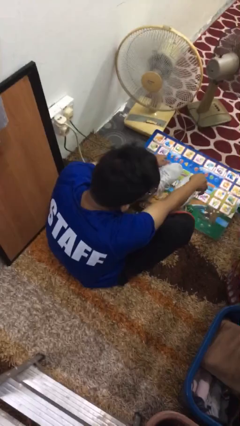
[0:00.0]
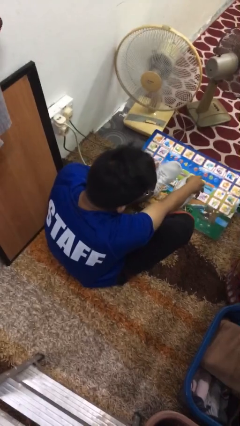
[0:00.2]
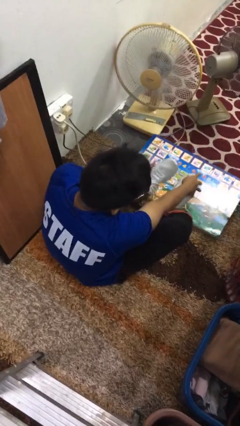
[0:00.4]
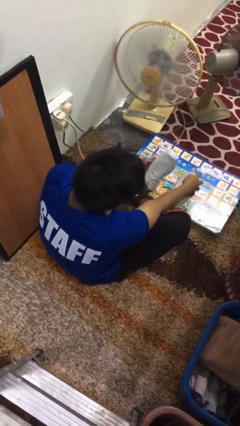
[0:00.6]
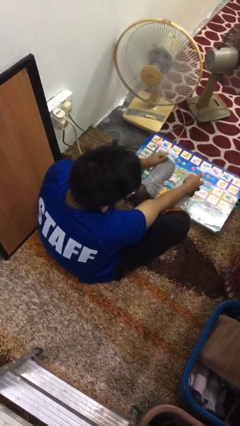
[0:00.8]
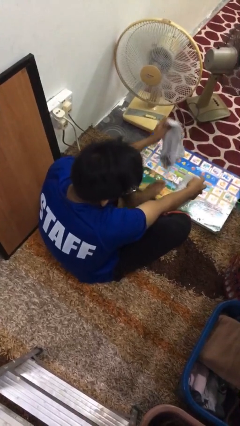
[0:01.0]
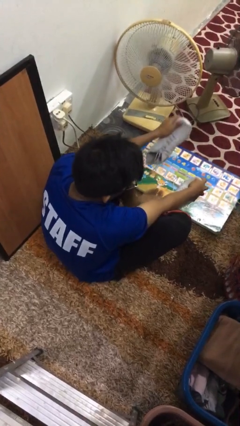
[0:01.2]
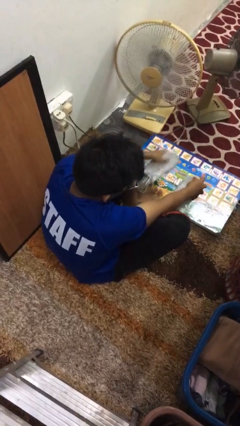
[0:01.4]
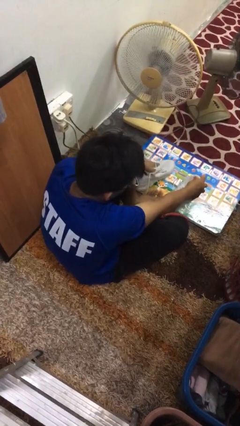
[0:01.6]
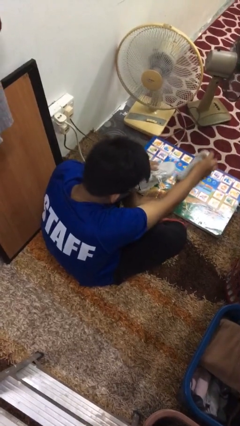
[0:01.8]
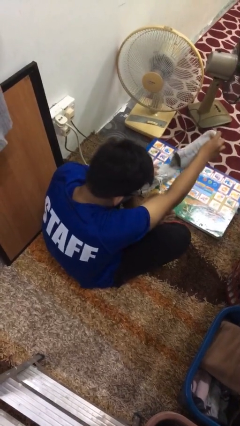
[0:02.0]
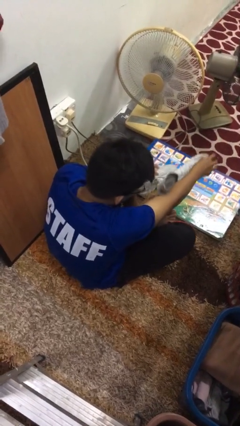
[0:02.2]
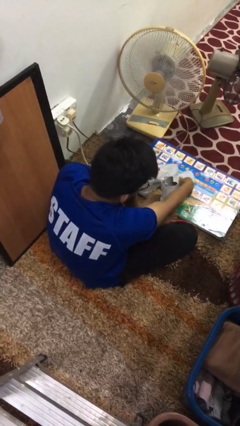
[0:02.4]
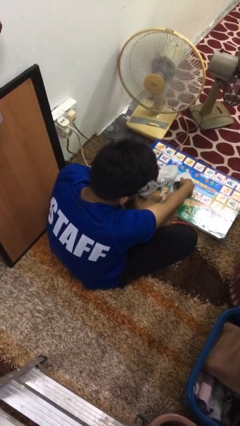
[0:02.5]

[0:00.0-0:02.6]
person takes off shoes

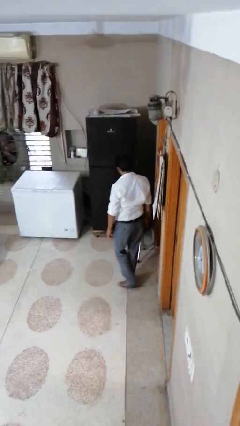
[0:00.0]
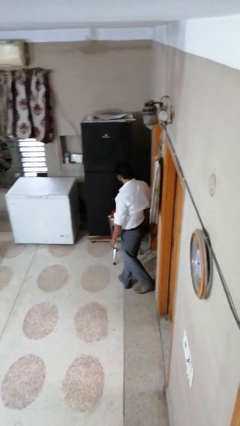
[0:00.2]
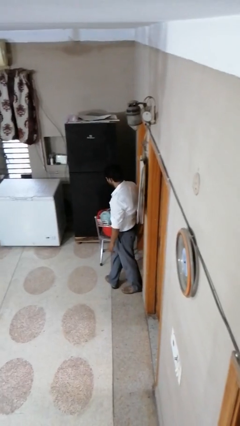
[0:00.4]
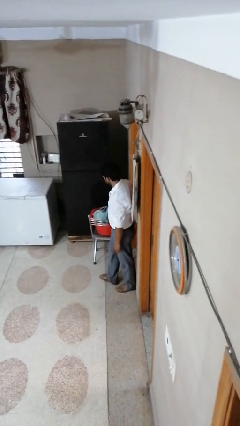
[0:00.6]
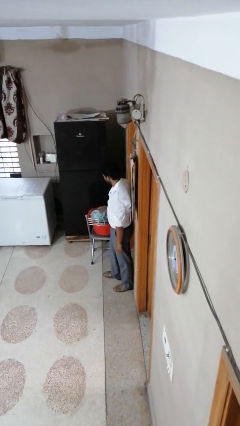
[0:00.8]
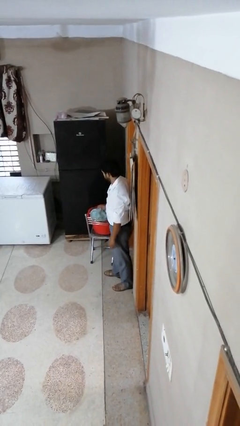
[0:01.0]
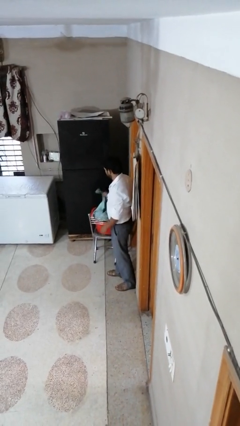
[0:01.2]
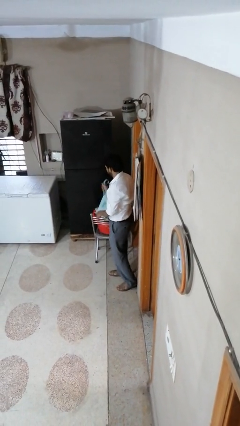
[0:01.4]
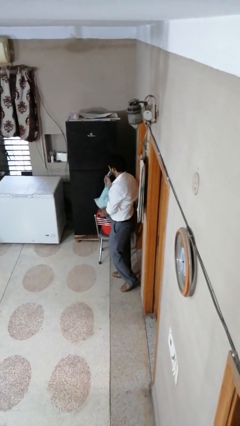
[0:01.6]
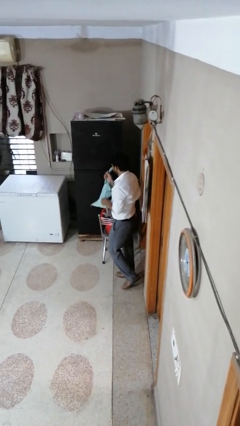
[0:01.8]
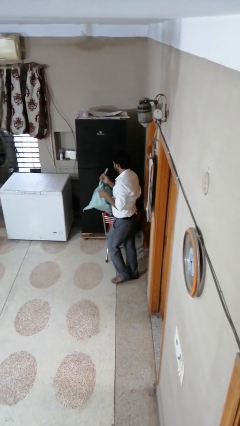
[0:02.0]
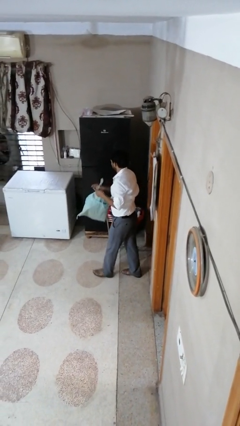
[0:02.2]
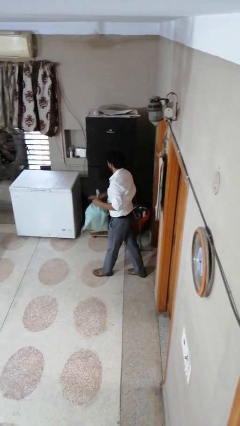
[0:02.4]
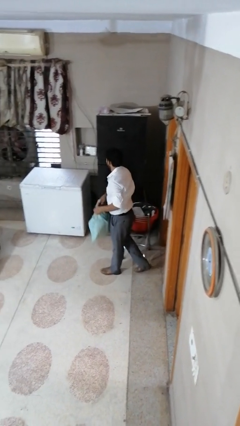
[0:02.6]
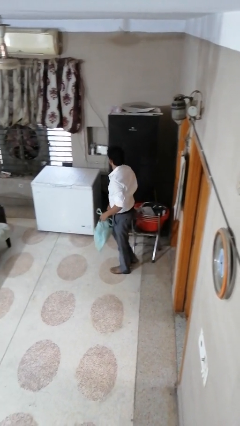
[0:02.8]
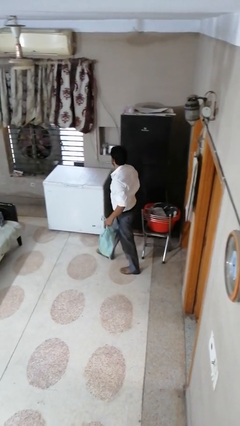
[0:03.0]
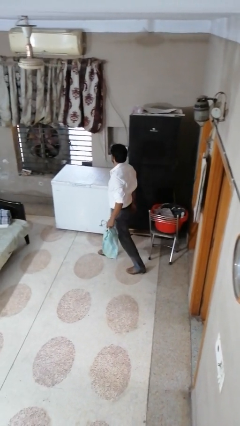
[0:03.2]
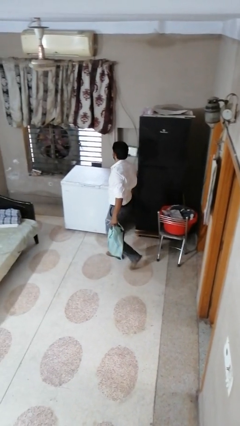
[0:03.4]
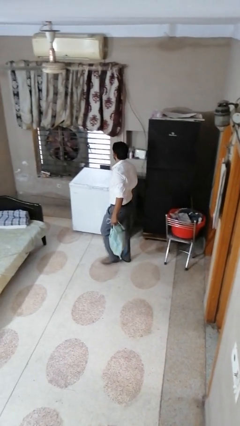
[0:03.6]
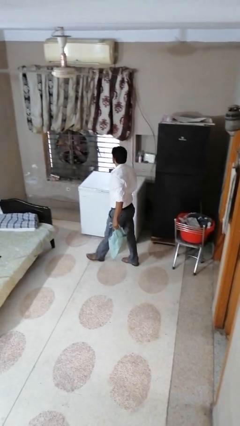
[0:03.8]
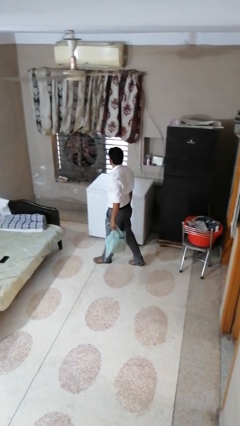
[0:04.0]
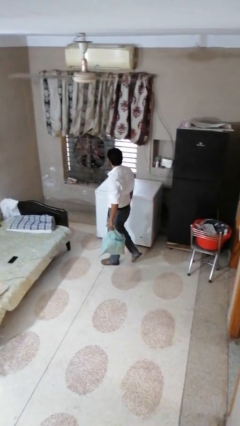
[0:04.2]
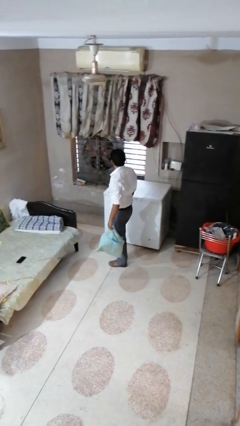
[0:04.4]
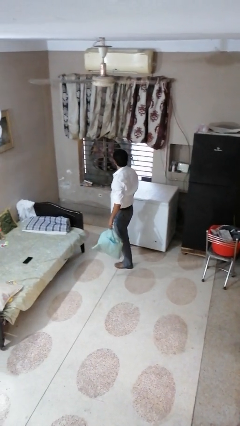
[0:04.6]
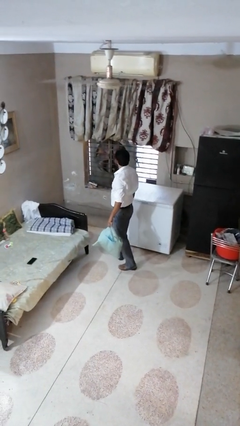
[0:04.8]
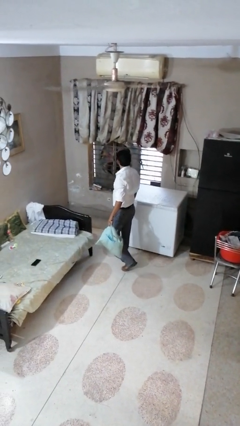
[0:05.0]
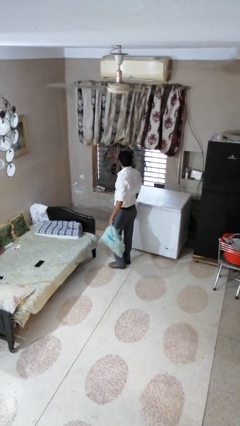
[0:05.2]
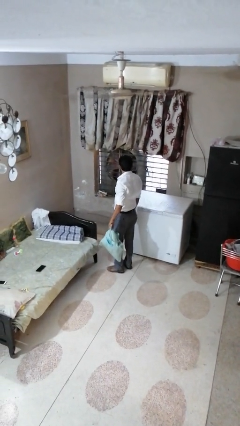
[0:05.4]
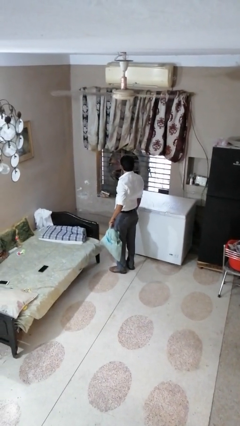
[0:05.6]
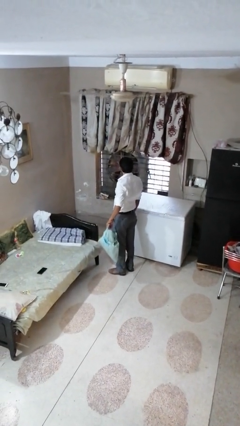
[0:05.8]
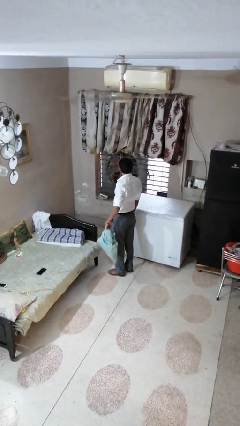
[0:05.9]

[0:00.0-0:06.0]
person carries groceries

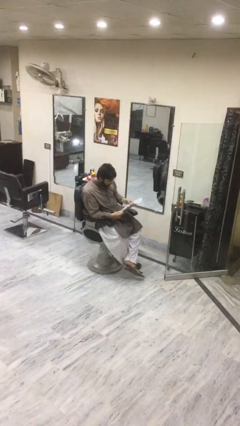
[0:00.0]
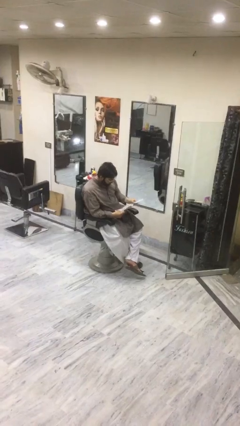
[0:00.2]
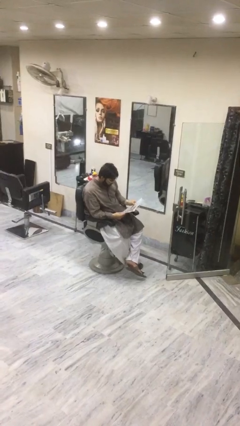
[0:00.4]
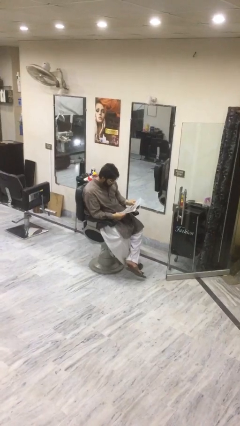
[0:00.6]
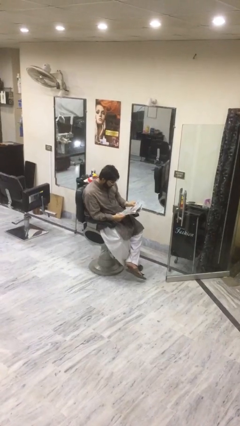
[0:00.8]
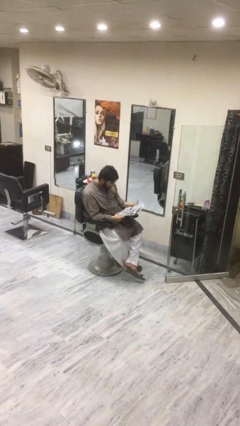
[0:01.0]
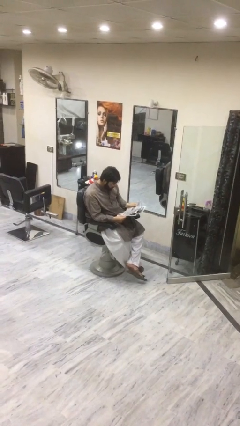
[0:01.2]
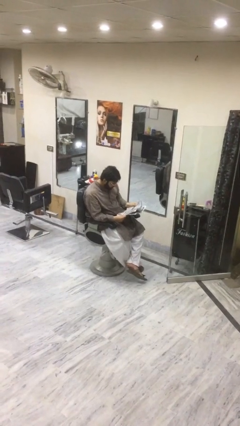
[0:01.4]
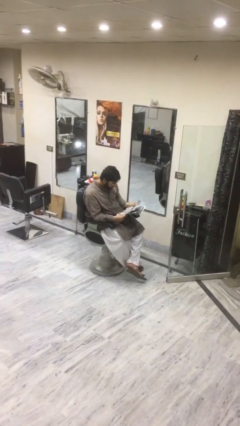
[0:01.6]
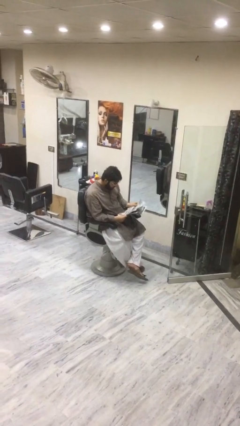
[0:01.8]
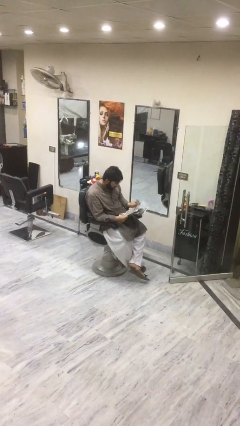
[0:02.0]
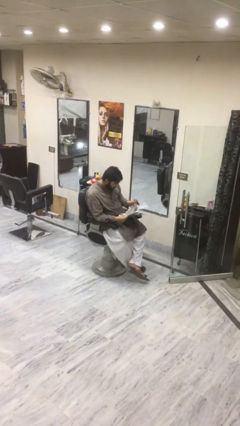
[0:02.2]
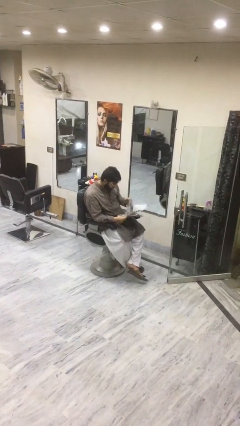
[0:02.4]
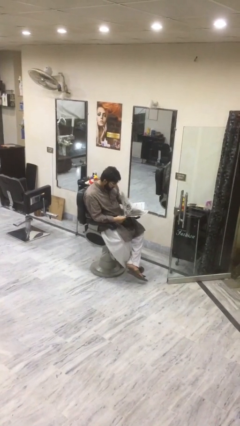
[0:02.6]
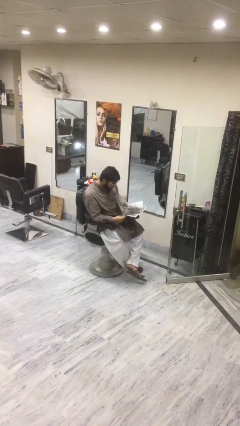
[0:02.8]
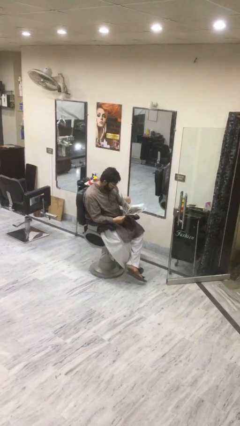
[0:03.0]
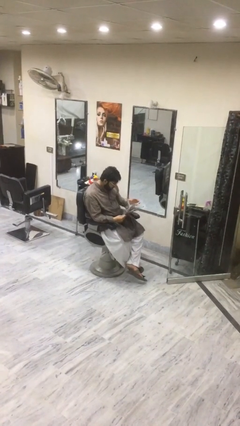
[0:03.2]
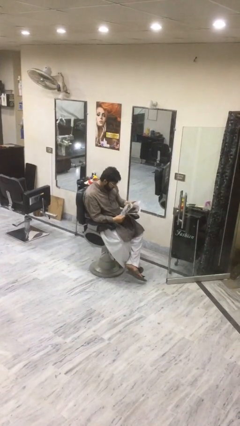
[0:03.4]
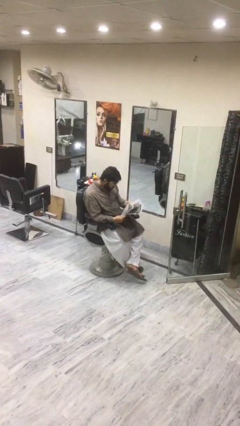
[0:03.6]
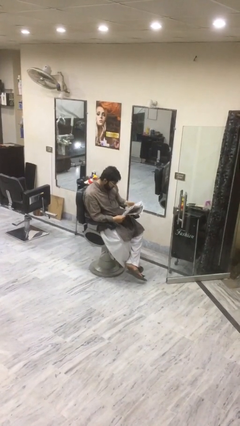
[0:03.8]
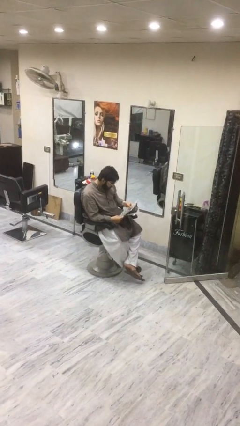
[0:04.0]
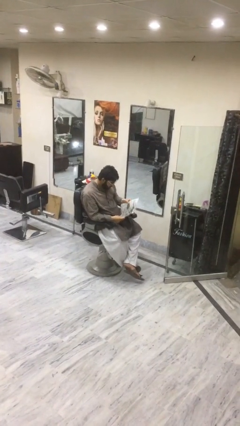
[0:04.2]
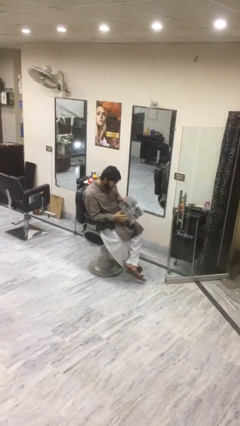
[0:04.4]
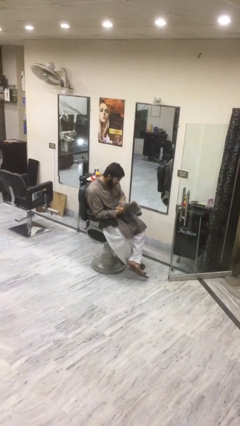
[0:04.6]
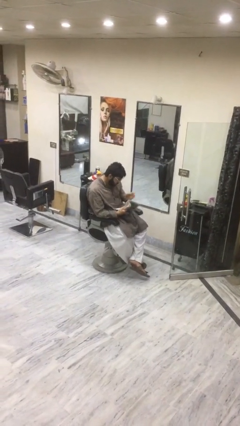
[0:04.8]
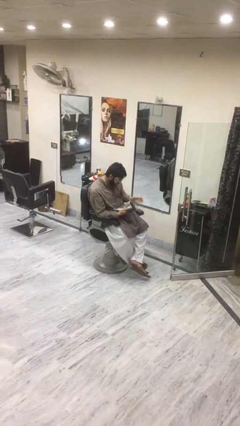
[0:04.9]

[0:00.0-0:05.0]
person reads document

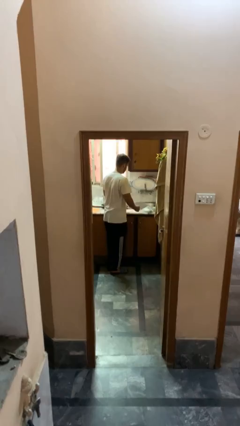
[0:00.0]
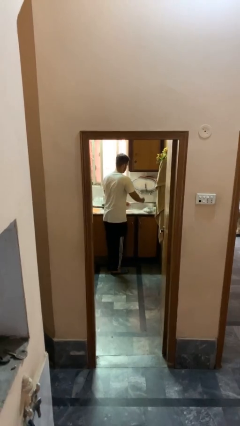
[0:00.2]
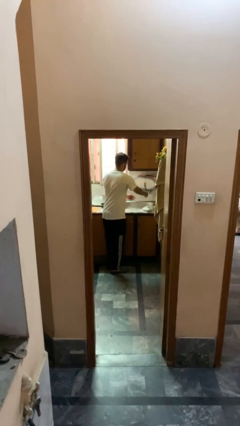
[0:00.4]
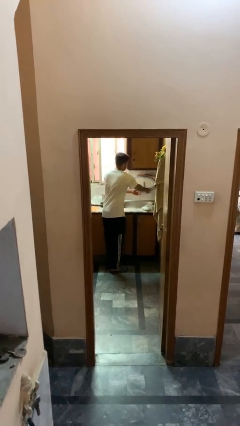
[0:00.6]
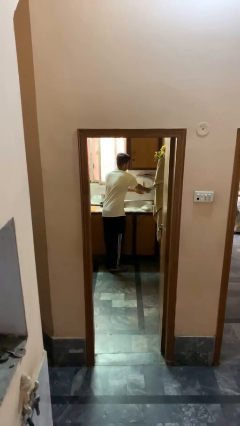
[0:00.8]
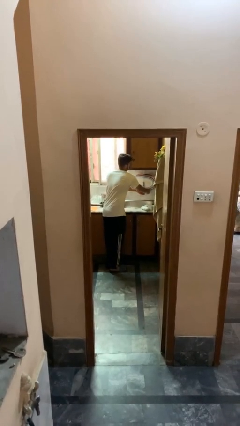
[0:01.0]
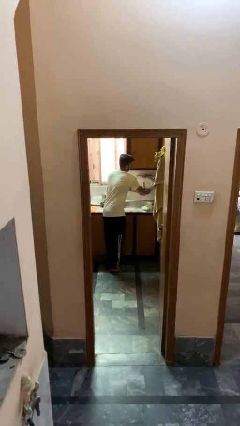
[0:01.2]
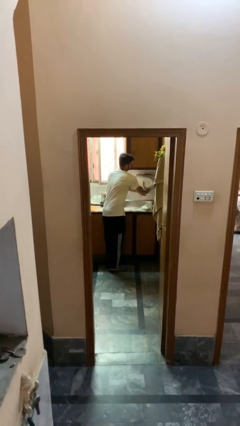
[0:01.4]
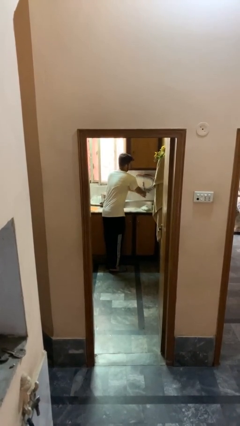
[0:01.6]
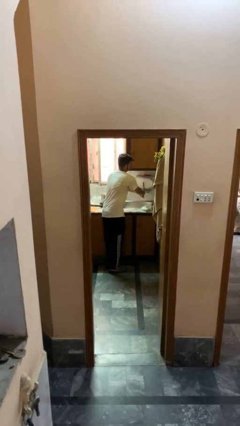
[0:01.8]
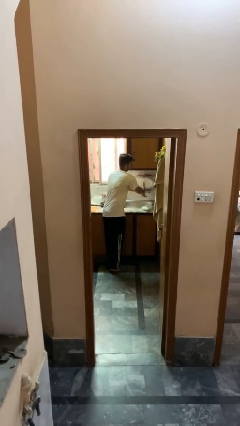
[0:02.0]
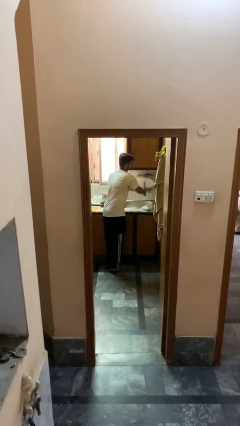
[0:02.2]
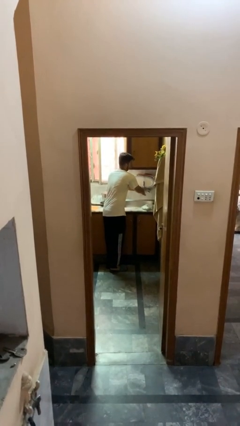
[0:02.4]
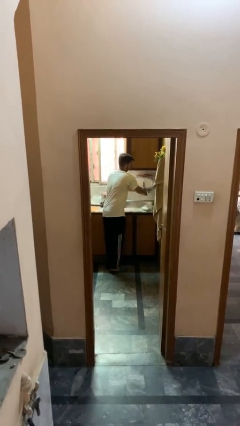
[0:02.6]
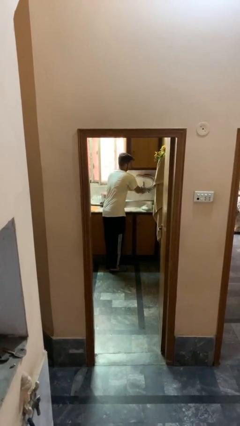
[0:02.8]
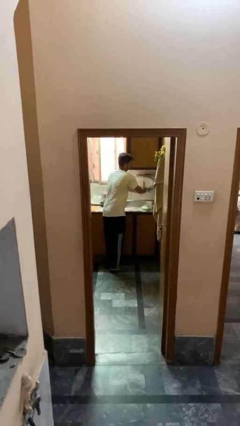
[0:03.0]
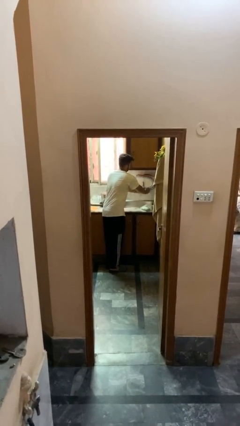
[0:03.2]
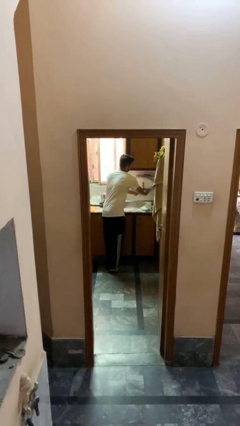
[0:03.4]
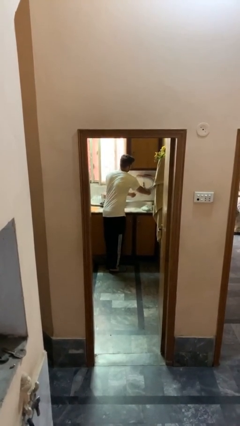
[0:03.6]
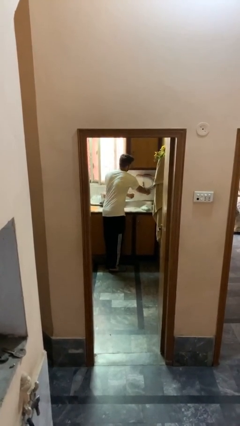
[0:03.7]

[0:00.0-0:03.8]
person washes hands

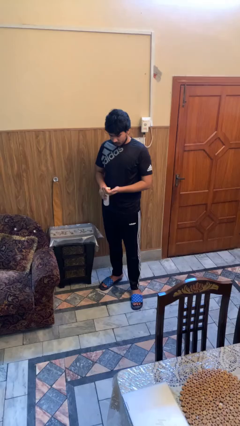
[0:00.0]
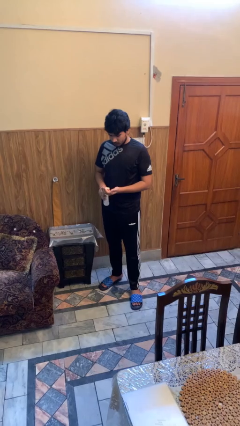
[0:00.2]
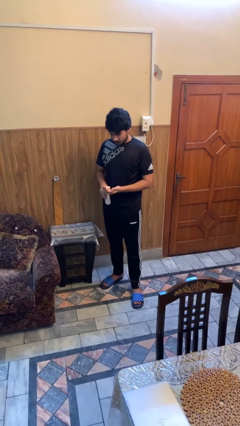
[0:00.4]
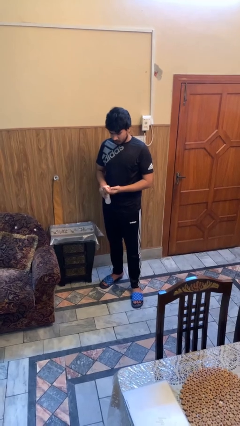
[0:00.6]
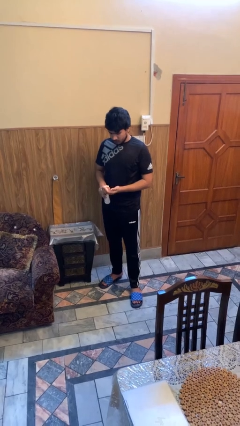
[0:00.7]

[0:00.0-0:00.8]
person applies sunscreen
